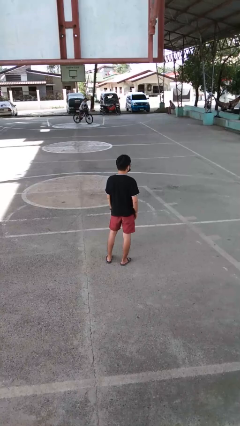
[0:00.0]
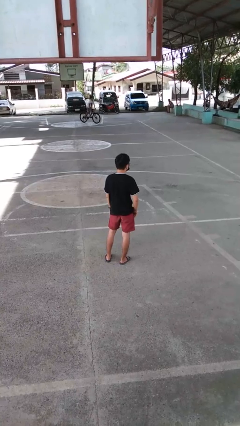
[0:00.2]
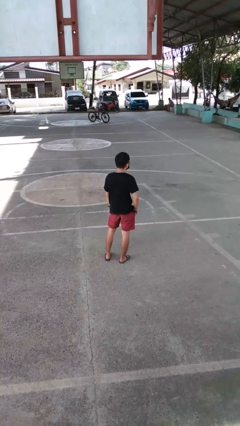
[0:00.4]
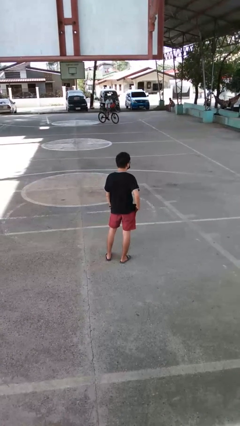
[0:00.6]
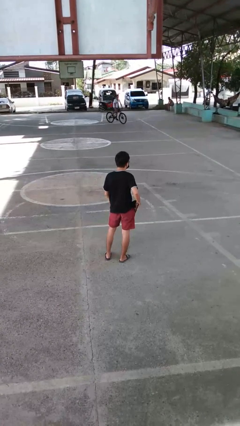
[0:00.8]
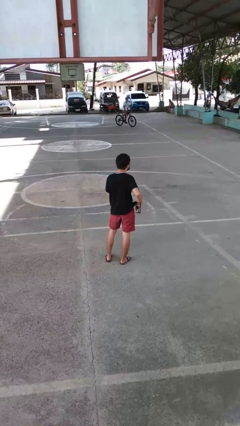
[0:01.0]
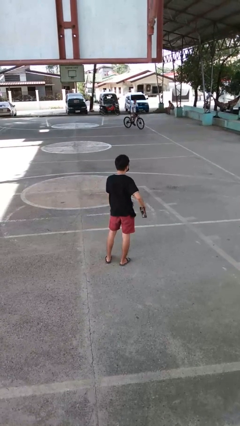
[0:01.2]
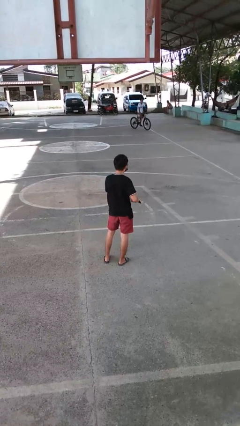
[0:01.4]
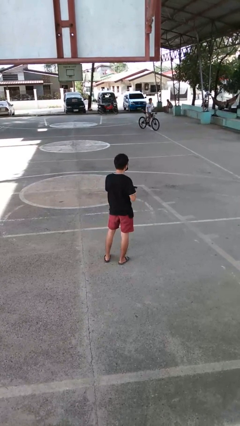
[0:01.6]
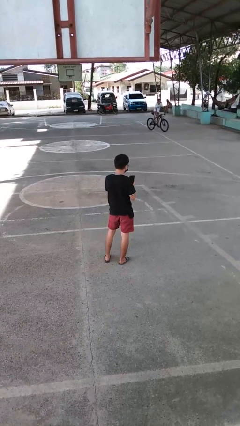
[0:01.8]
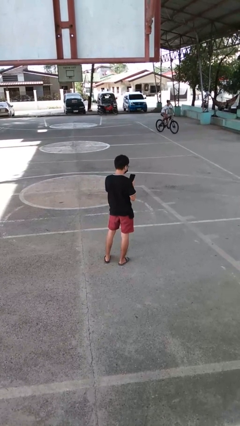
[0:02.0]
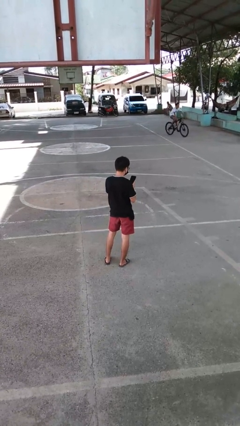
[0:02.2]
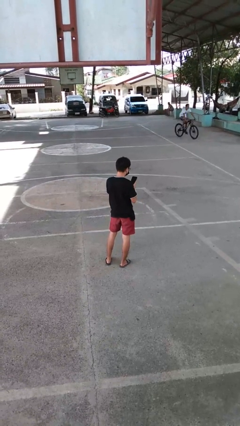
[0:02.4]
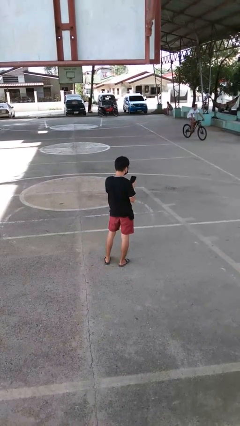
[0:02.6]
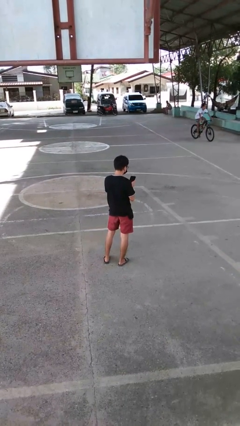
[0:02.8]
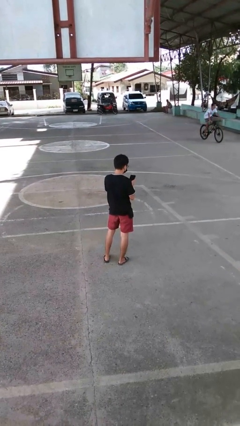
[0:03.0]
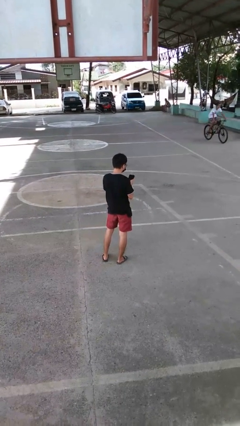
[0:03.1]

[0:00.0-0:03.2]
person takes phone from pocket

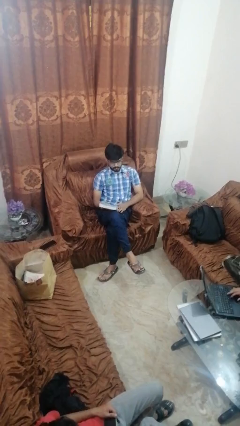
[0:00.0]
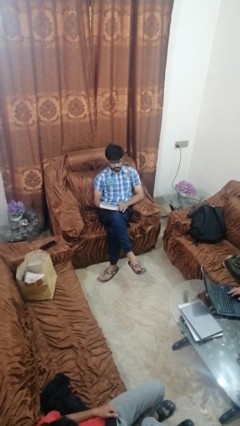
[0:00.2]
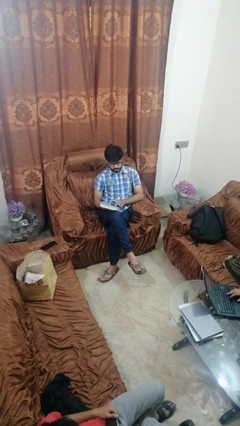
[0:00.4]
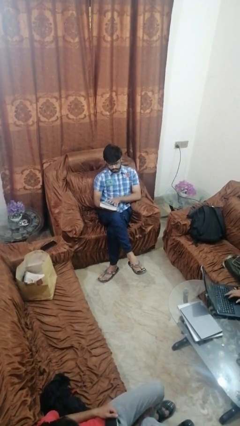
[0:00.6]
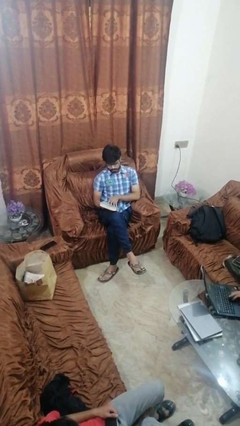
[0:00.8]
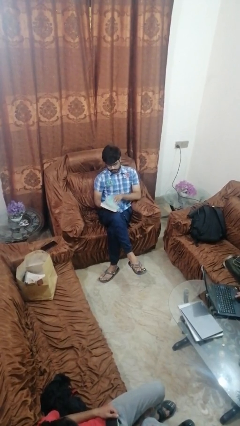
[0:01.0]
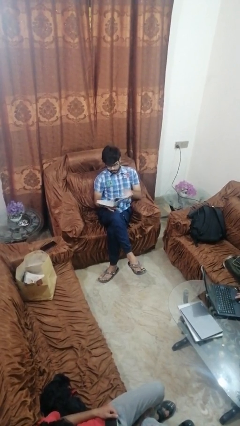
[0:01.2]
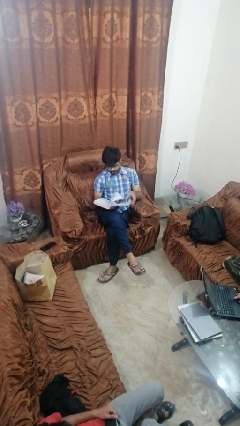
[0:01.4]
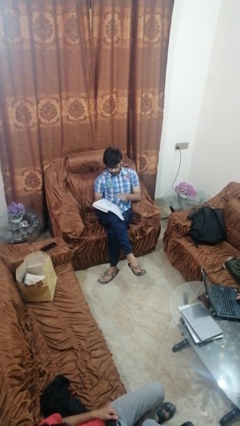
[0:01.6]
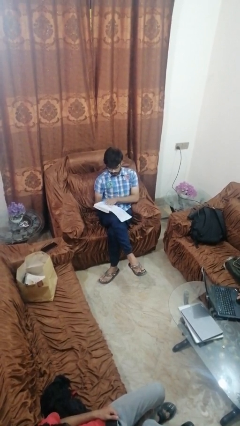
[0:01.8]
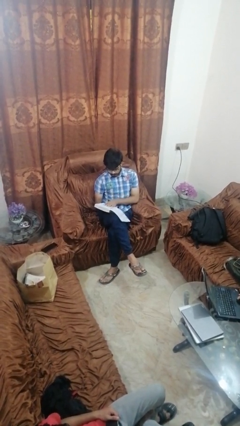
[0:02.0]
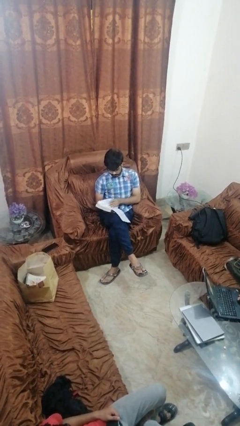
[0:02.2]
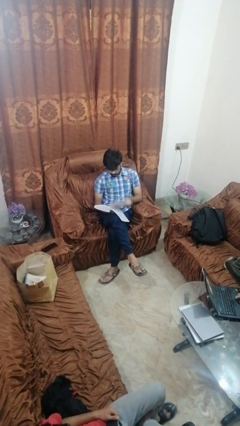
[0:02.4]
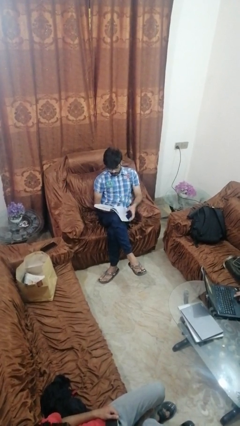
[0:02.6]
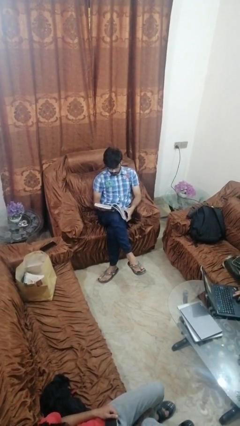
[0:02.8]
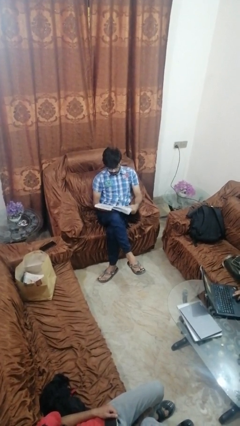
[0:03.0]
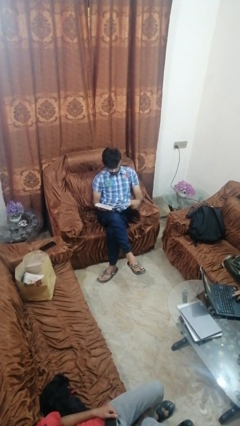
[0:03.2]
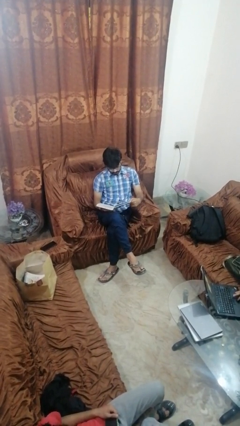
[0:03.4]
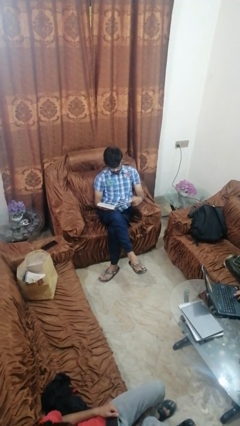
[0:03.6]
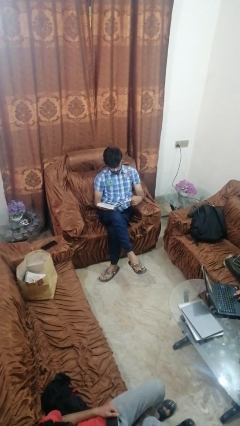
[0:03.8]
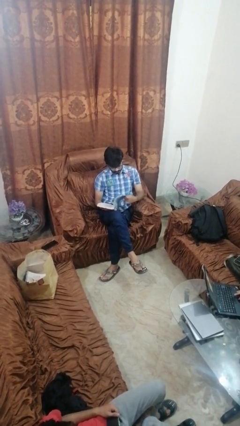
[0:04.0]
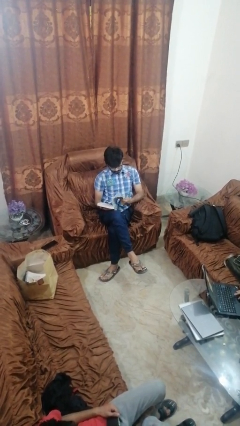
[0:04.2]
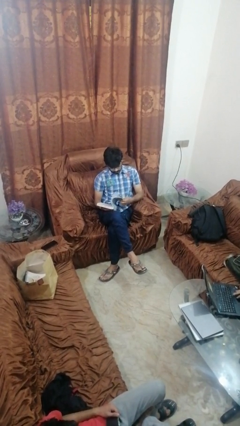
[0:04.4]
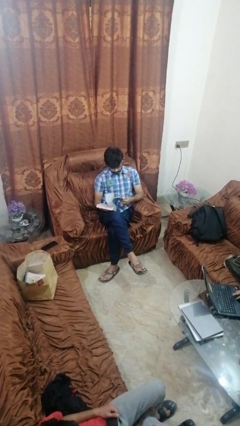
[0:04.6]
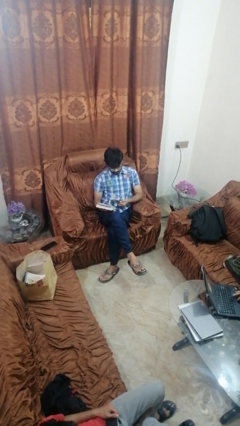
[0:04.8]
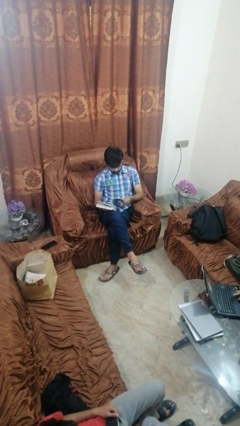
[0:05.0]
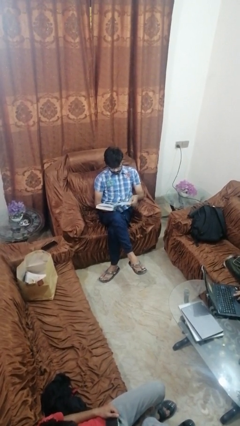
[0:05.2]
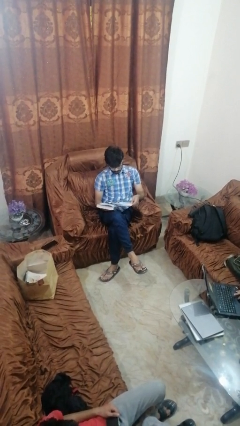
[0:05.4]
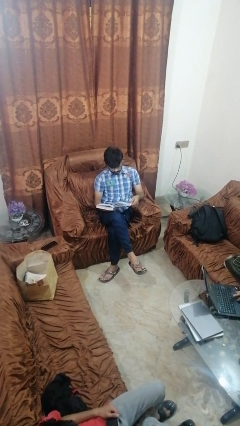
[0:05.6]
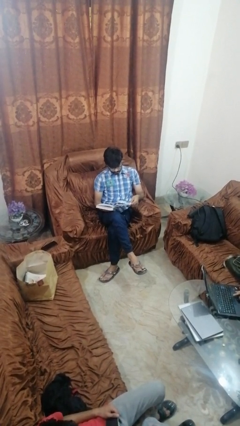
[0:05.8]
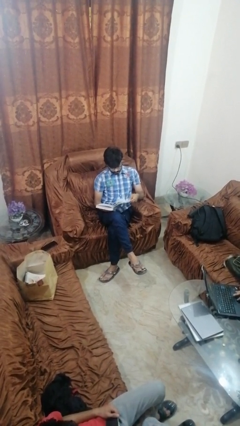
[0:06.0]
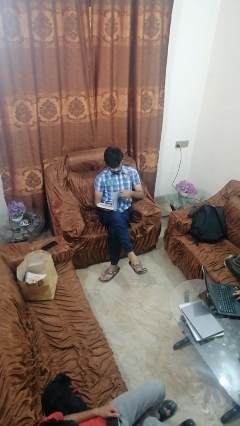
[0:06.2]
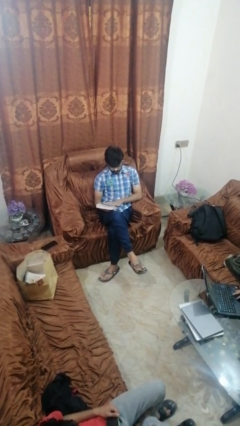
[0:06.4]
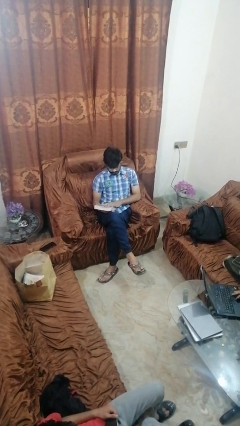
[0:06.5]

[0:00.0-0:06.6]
person reads book

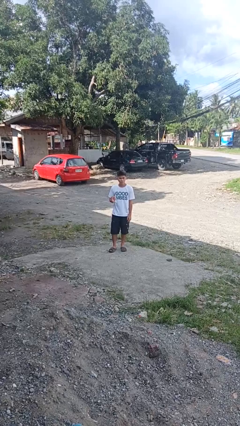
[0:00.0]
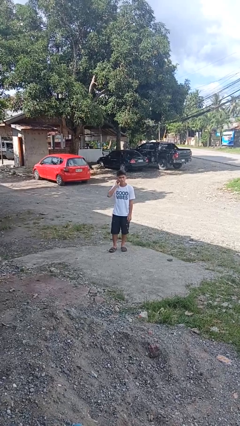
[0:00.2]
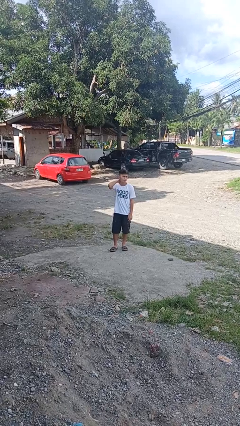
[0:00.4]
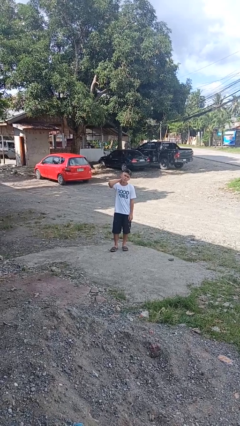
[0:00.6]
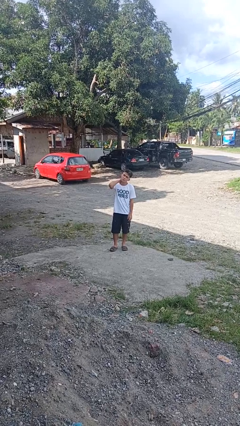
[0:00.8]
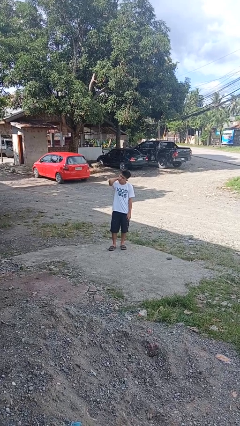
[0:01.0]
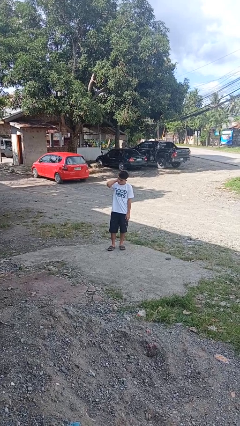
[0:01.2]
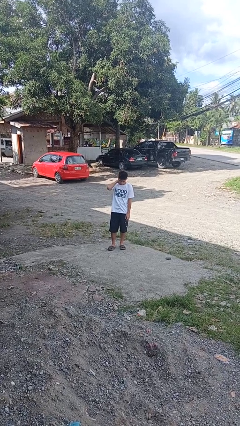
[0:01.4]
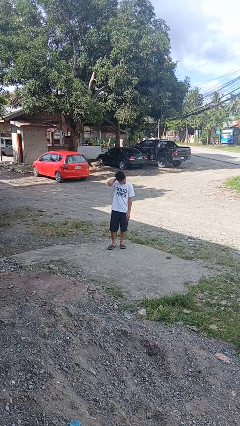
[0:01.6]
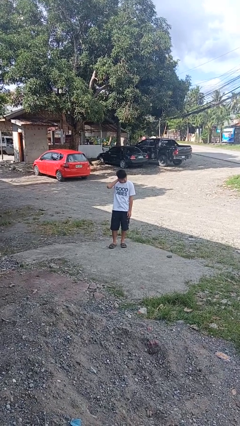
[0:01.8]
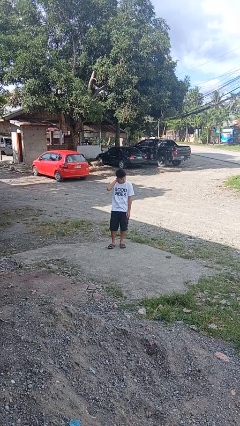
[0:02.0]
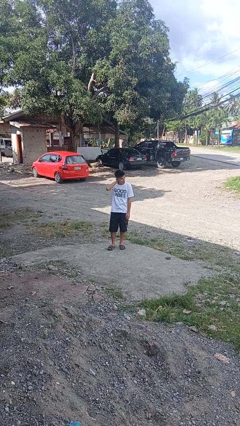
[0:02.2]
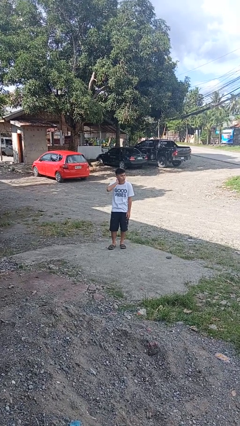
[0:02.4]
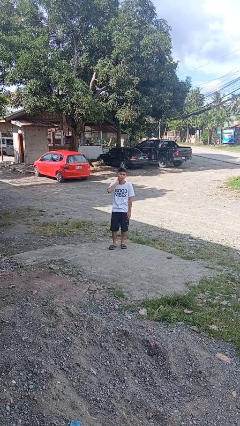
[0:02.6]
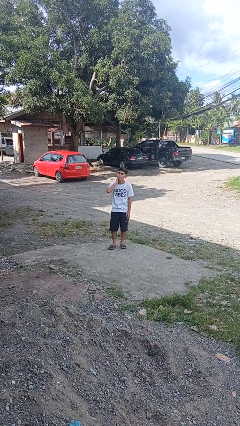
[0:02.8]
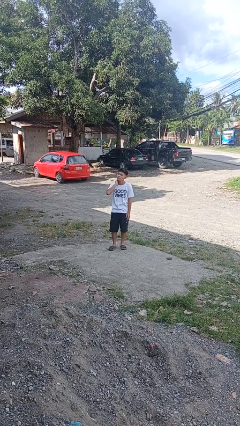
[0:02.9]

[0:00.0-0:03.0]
person rubs neck

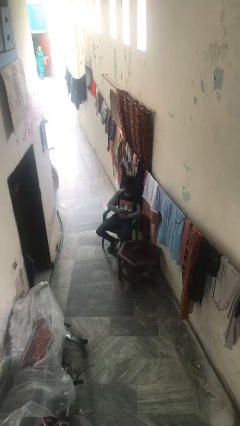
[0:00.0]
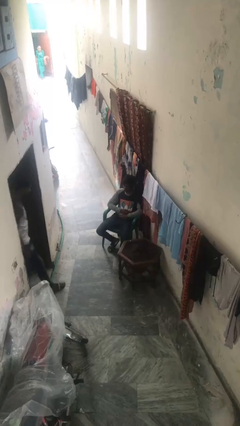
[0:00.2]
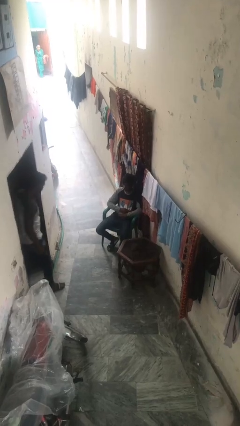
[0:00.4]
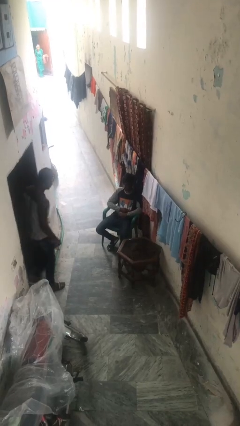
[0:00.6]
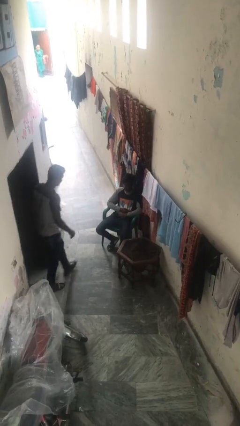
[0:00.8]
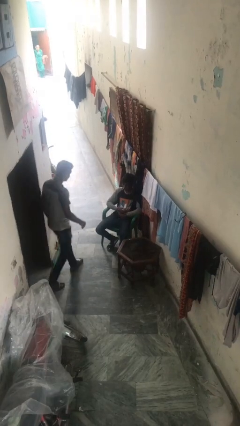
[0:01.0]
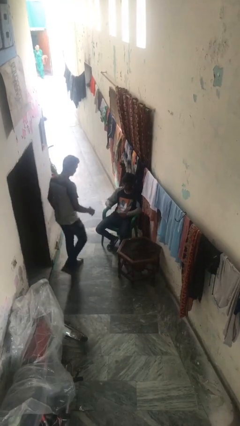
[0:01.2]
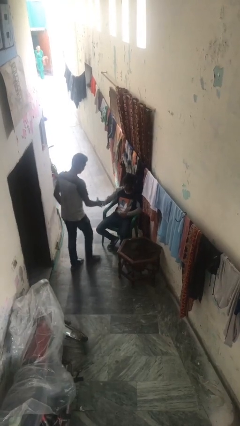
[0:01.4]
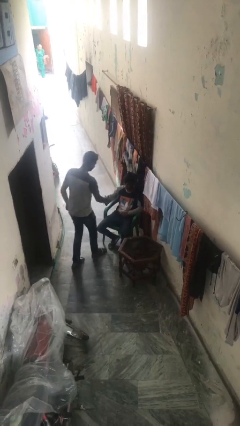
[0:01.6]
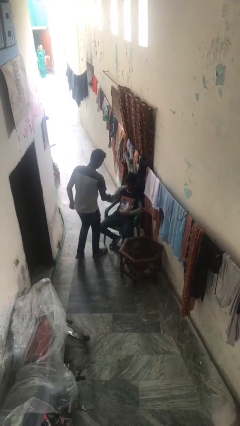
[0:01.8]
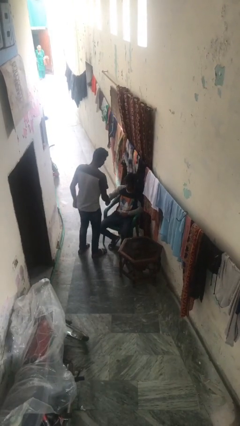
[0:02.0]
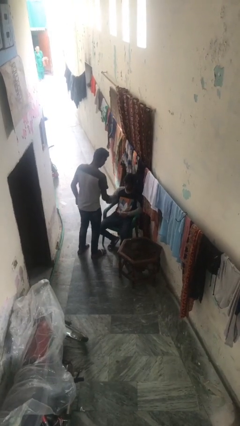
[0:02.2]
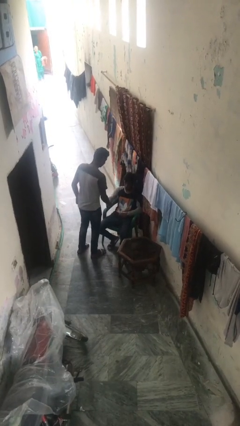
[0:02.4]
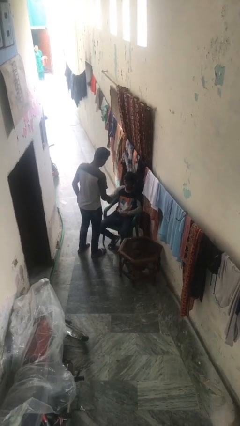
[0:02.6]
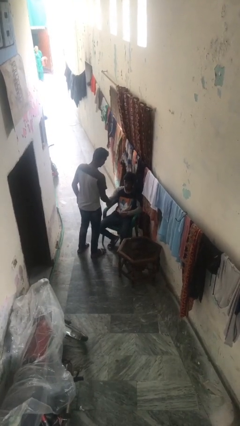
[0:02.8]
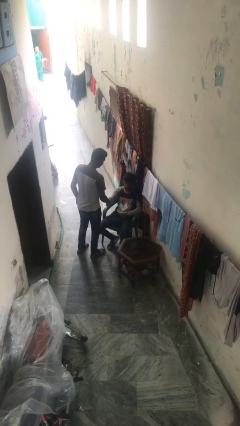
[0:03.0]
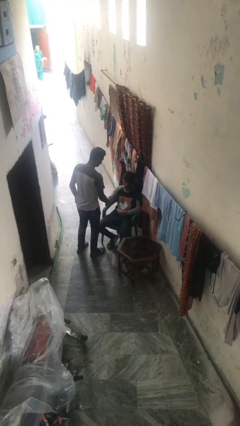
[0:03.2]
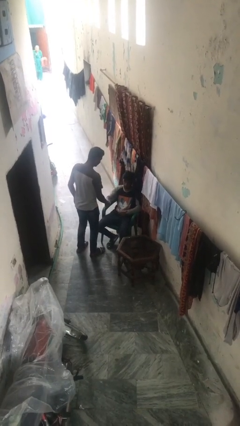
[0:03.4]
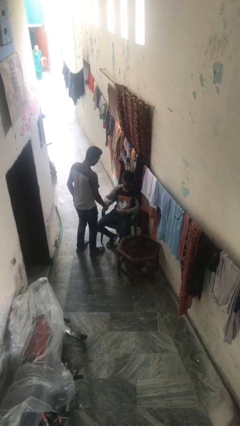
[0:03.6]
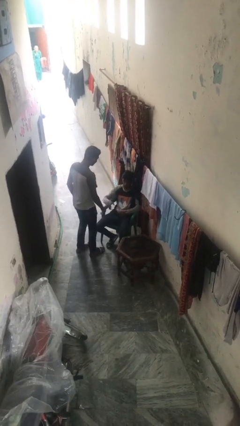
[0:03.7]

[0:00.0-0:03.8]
person shakes hand

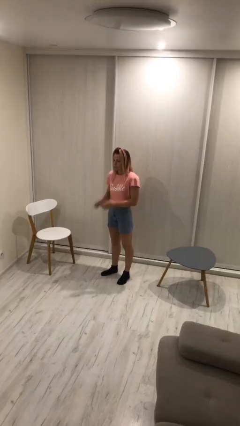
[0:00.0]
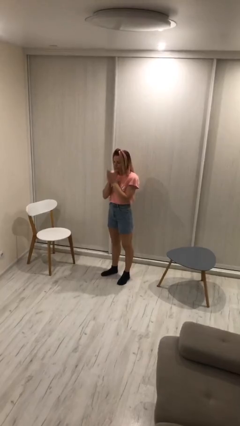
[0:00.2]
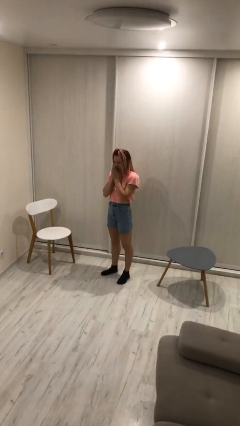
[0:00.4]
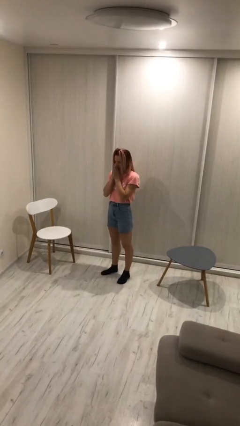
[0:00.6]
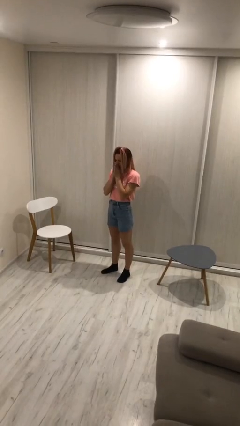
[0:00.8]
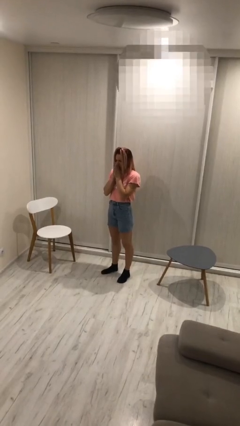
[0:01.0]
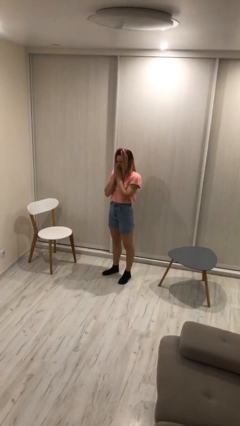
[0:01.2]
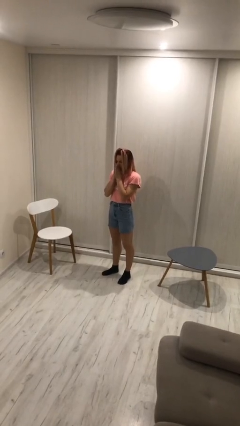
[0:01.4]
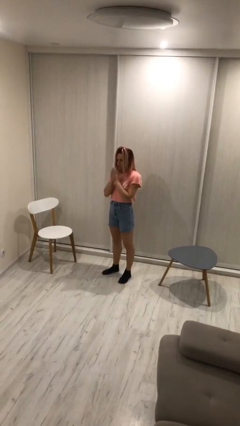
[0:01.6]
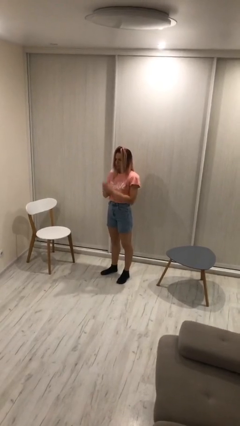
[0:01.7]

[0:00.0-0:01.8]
person prays
